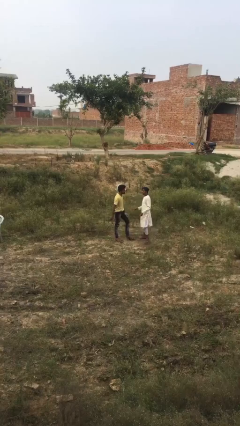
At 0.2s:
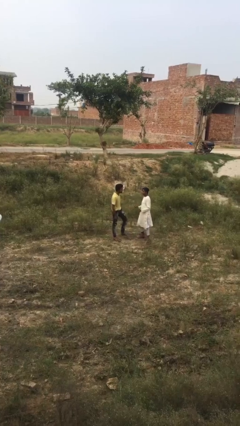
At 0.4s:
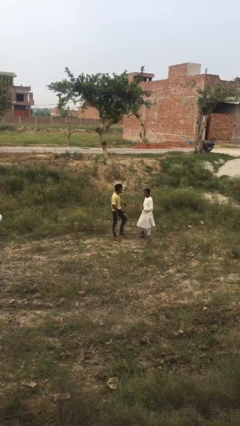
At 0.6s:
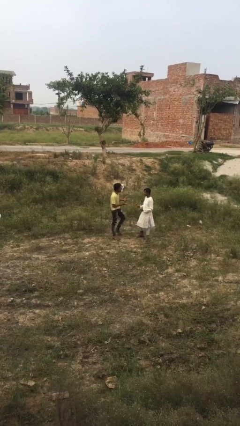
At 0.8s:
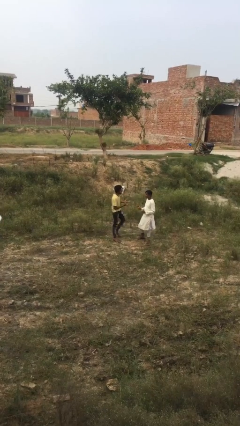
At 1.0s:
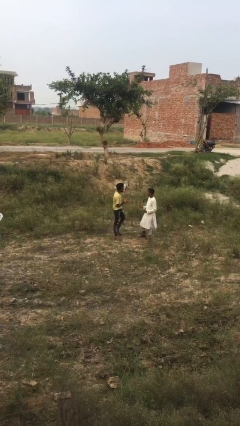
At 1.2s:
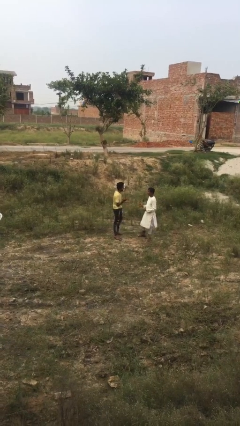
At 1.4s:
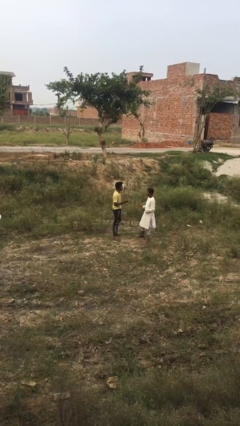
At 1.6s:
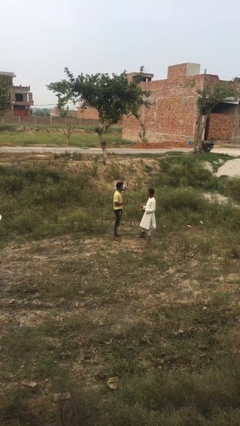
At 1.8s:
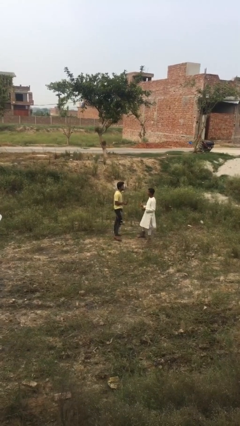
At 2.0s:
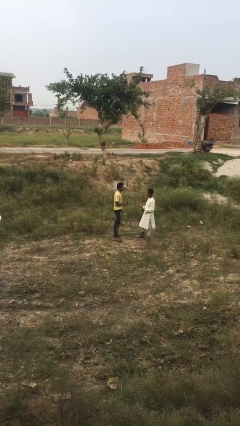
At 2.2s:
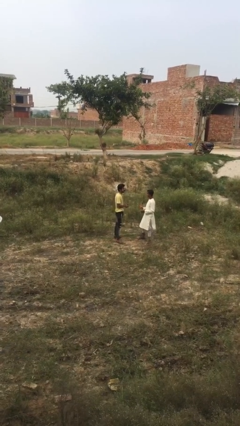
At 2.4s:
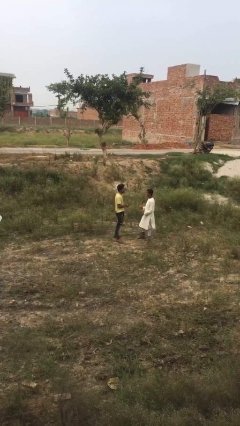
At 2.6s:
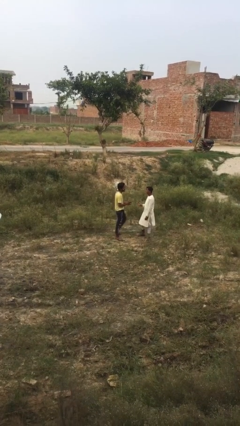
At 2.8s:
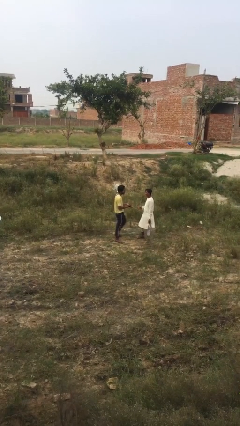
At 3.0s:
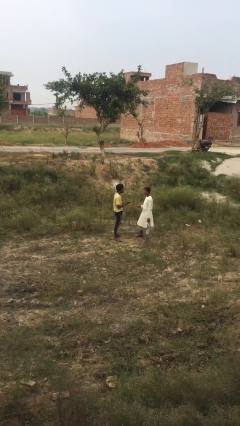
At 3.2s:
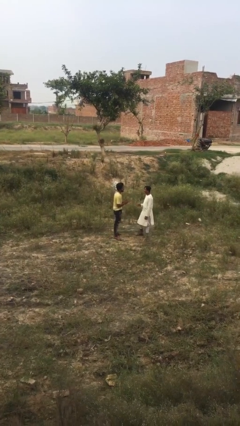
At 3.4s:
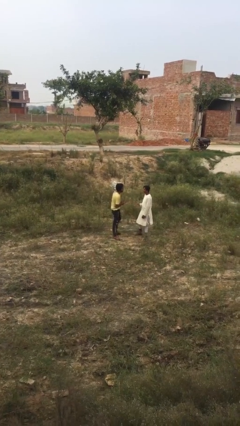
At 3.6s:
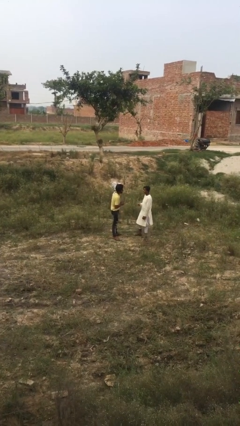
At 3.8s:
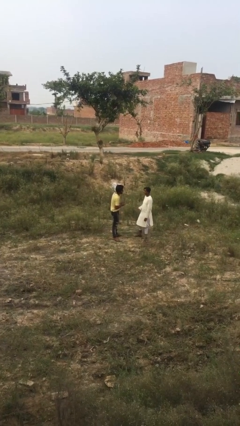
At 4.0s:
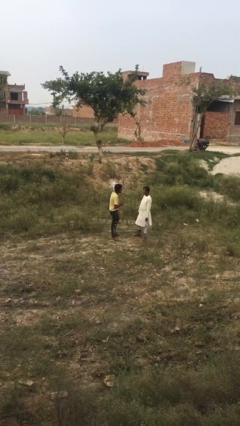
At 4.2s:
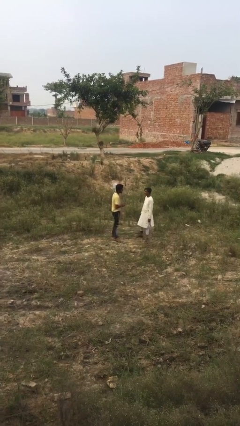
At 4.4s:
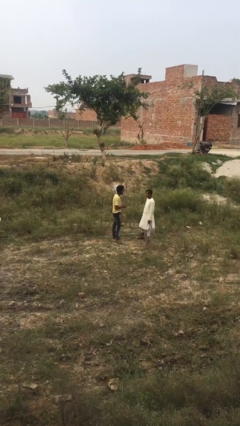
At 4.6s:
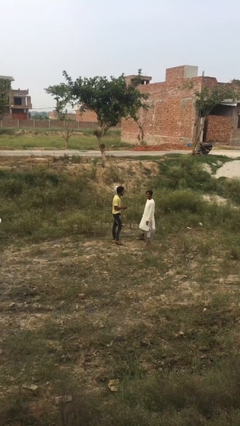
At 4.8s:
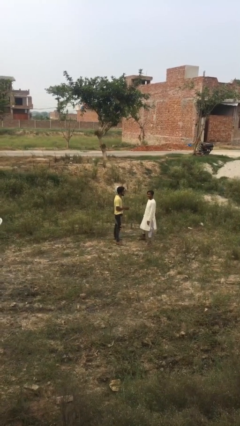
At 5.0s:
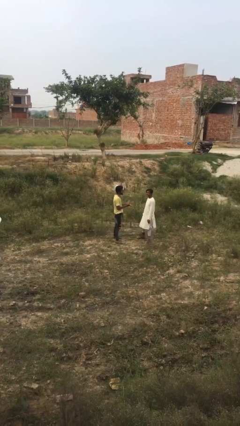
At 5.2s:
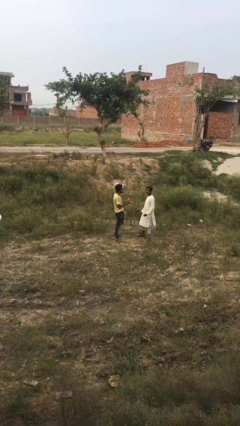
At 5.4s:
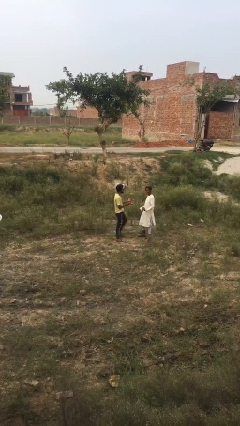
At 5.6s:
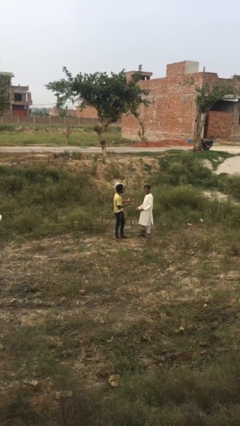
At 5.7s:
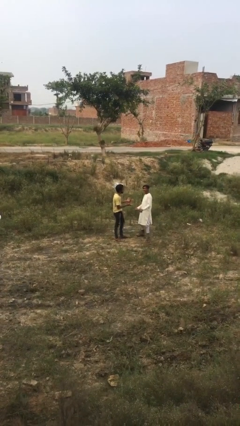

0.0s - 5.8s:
person talks to person

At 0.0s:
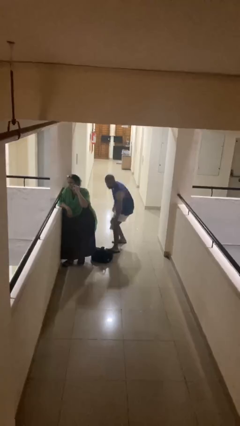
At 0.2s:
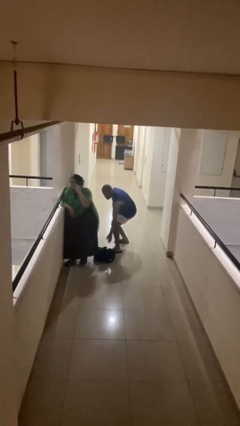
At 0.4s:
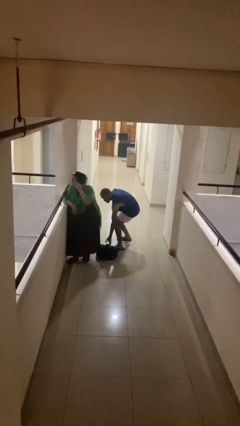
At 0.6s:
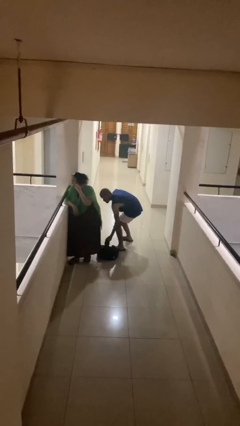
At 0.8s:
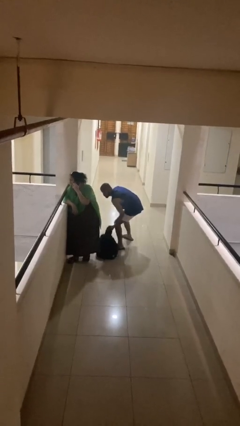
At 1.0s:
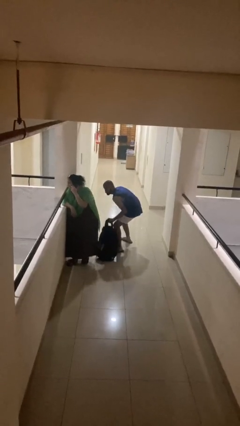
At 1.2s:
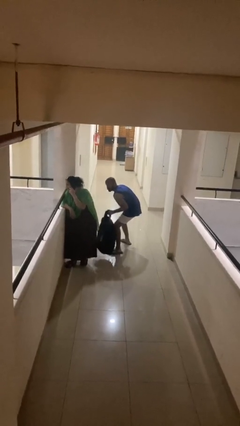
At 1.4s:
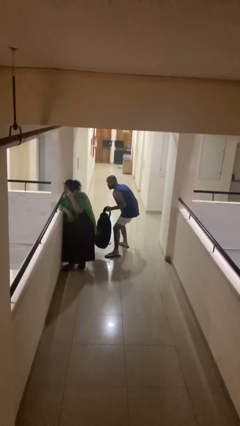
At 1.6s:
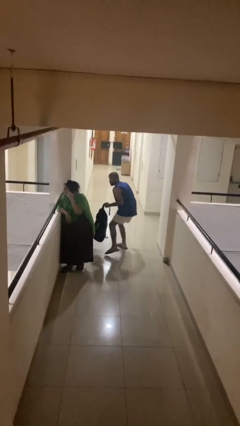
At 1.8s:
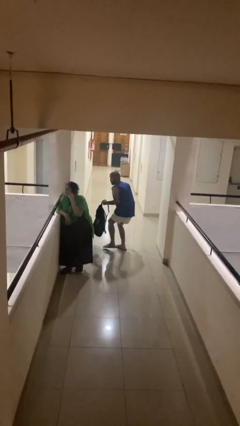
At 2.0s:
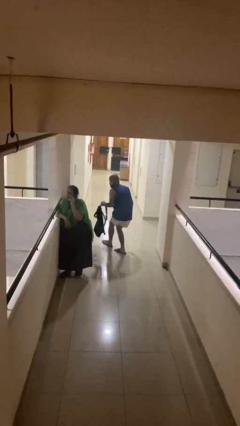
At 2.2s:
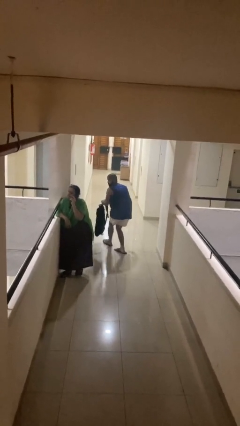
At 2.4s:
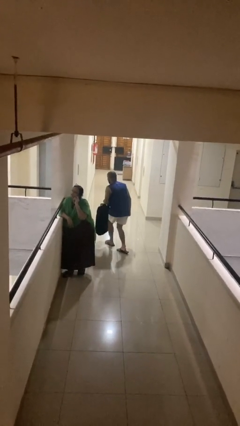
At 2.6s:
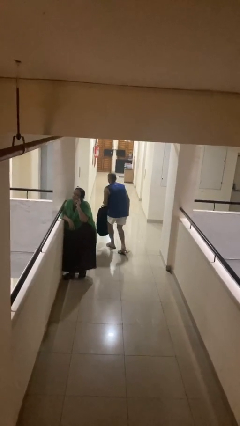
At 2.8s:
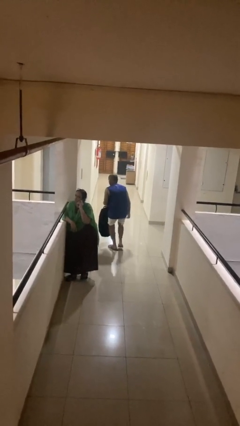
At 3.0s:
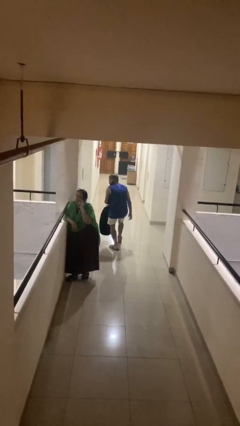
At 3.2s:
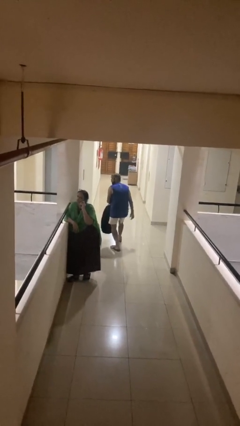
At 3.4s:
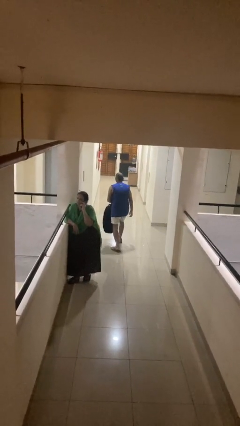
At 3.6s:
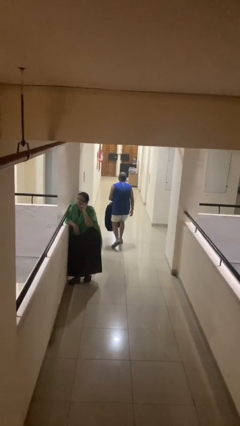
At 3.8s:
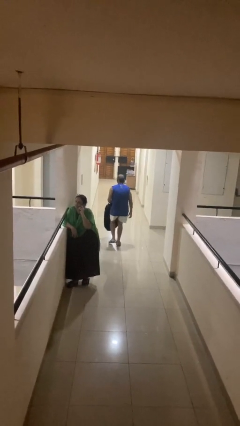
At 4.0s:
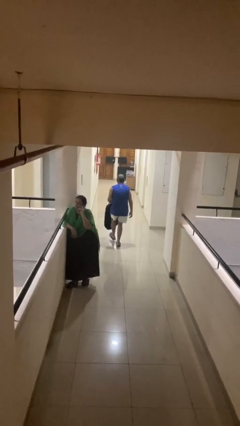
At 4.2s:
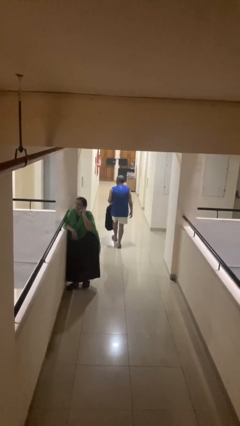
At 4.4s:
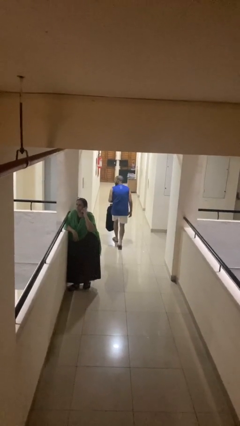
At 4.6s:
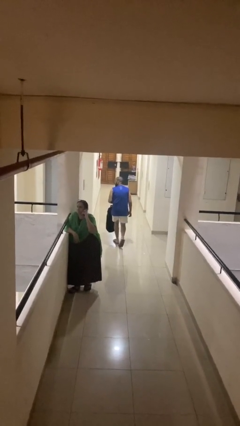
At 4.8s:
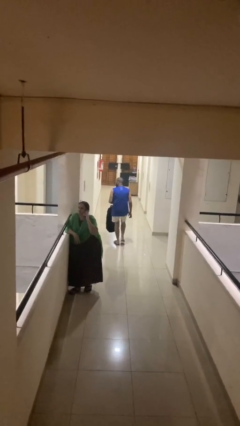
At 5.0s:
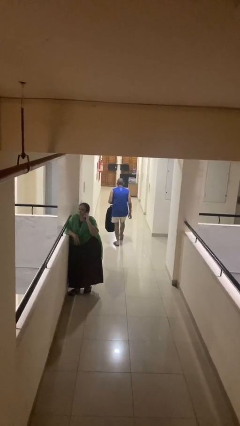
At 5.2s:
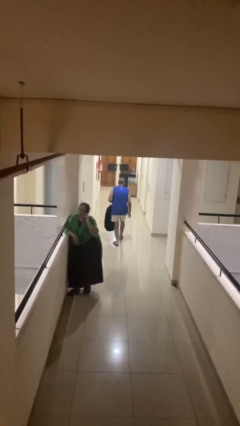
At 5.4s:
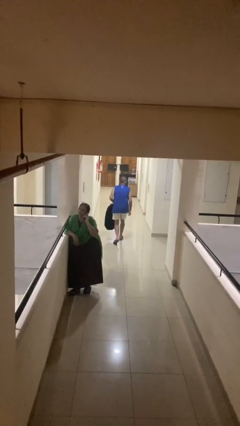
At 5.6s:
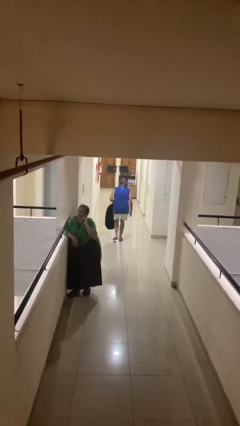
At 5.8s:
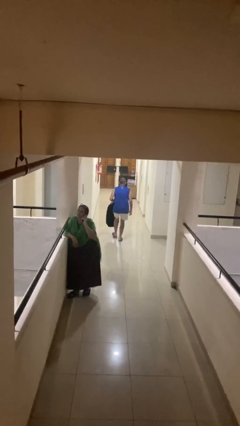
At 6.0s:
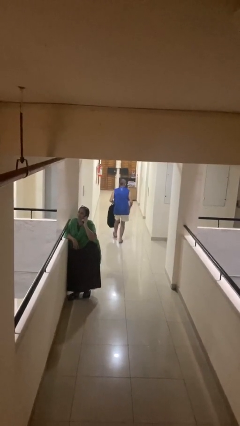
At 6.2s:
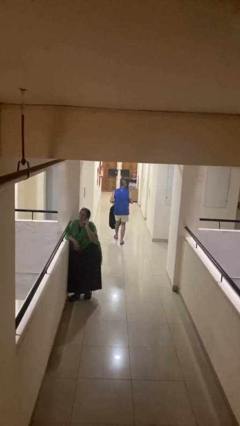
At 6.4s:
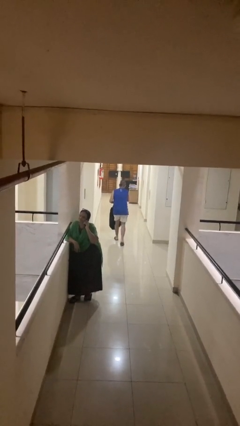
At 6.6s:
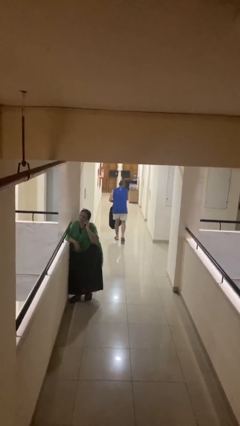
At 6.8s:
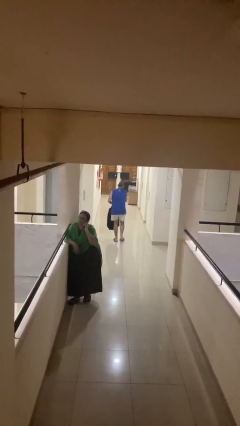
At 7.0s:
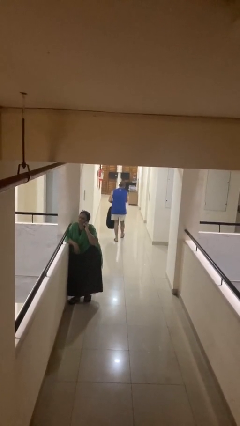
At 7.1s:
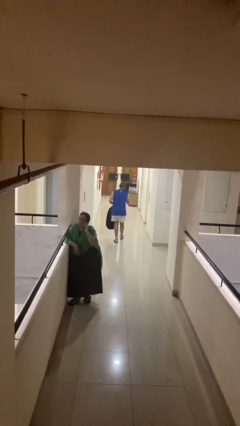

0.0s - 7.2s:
person steals object from person

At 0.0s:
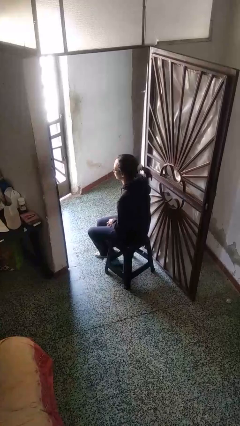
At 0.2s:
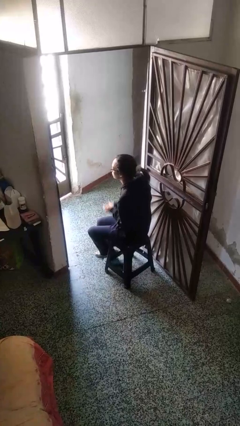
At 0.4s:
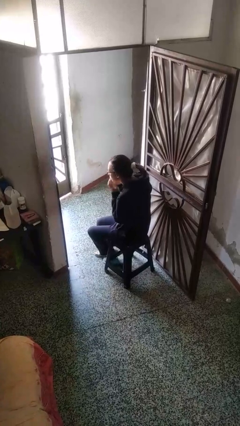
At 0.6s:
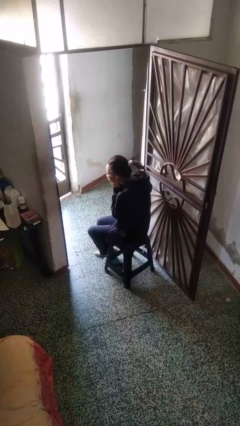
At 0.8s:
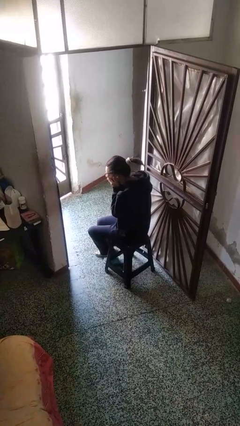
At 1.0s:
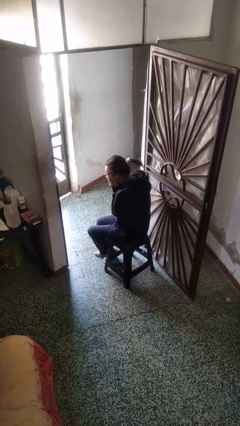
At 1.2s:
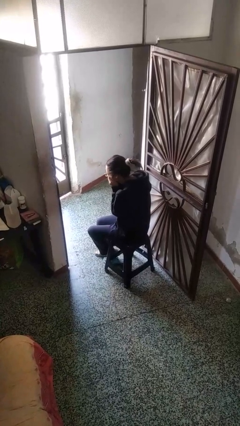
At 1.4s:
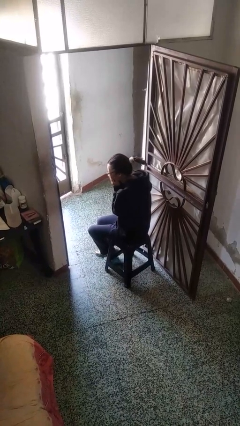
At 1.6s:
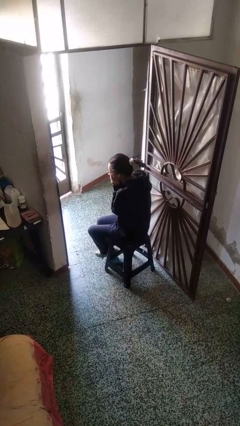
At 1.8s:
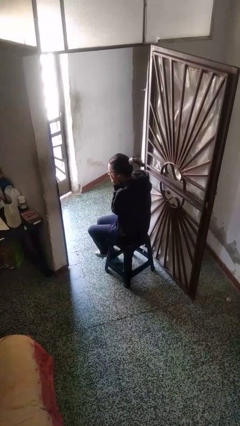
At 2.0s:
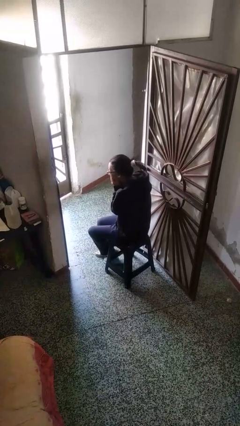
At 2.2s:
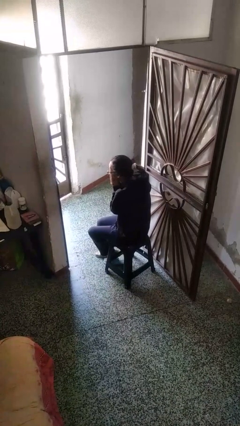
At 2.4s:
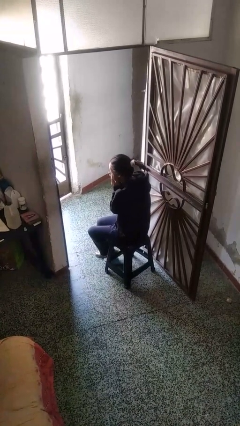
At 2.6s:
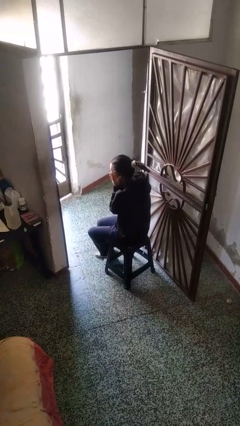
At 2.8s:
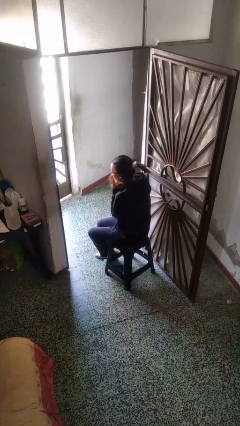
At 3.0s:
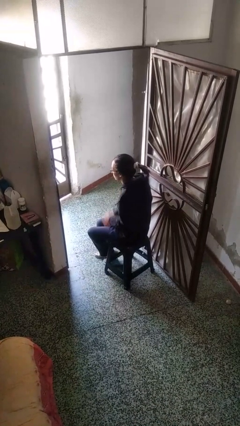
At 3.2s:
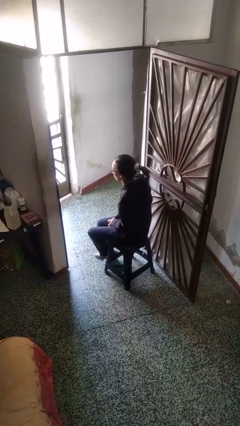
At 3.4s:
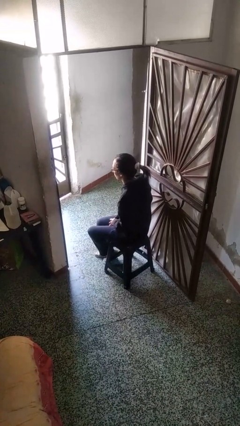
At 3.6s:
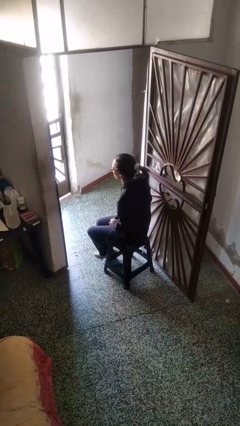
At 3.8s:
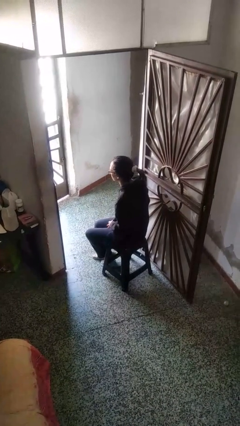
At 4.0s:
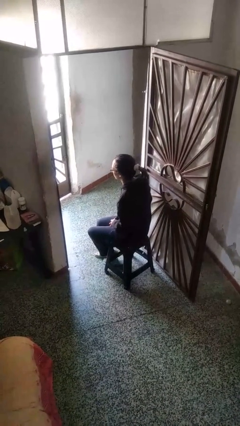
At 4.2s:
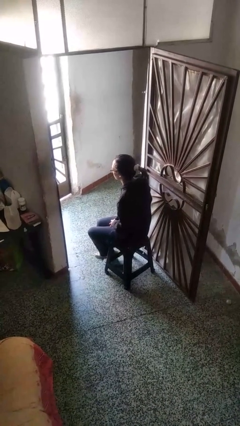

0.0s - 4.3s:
person rubs eyes

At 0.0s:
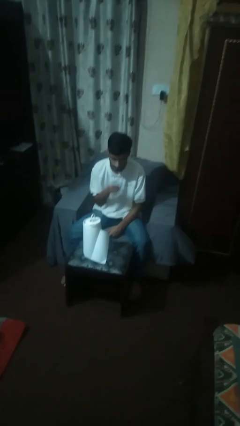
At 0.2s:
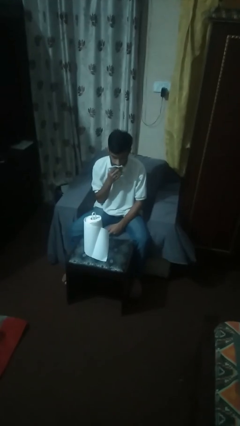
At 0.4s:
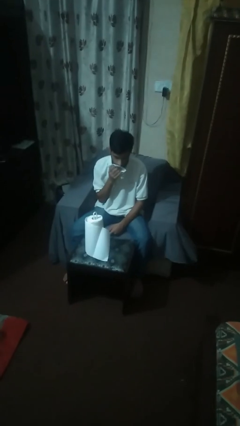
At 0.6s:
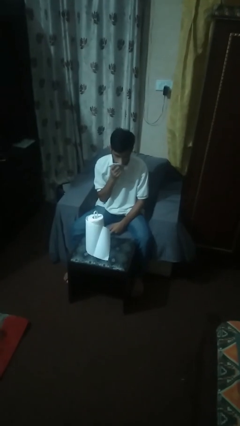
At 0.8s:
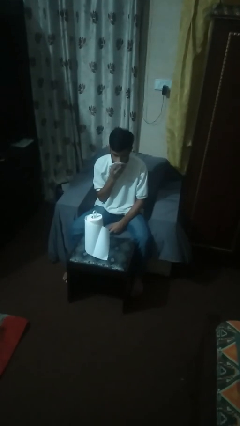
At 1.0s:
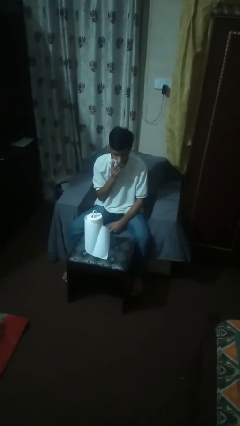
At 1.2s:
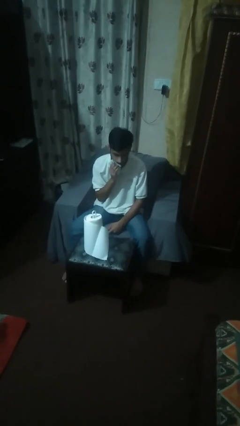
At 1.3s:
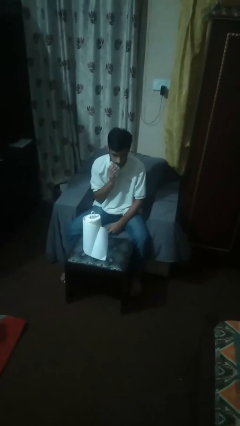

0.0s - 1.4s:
person wipes mouth with napkin
